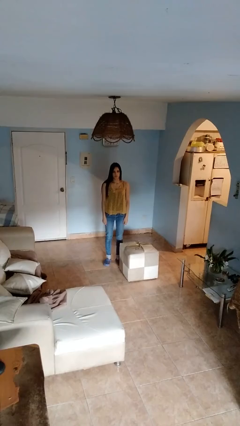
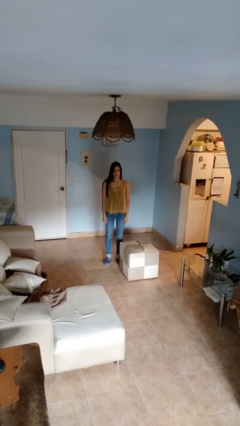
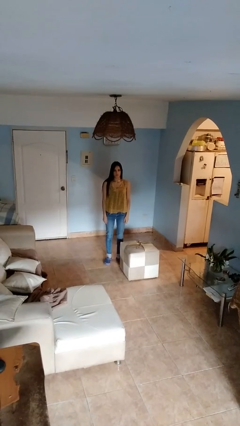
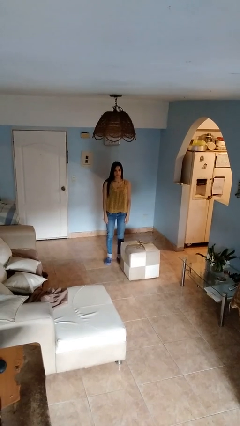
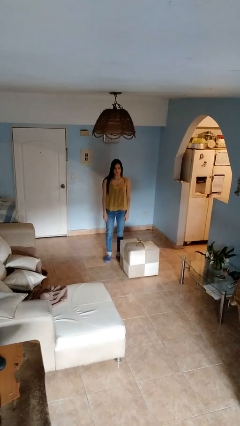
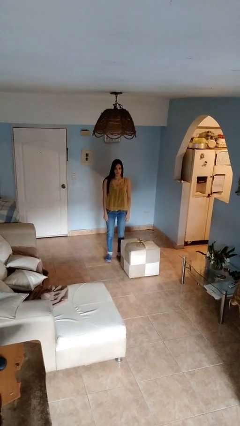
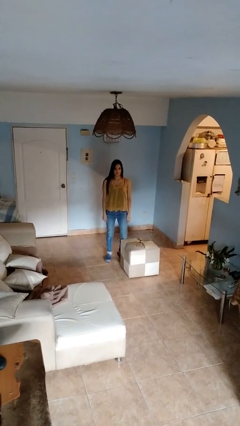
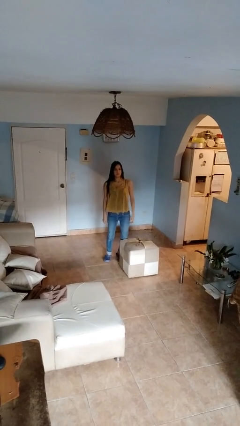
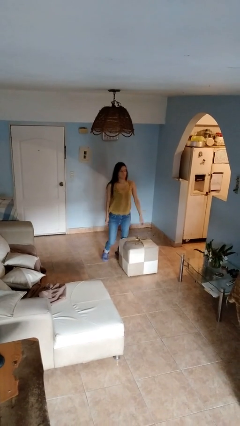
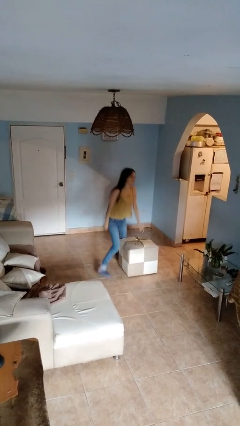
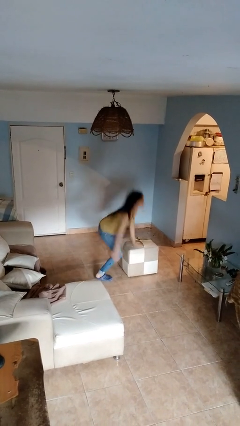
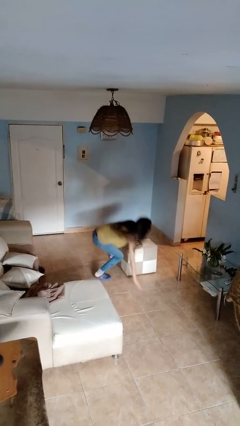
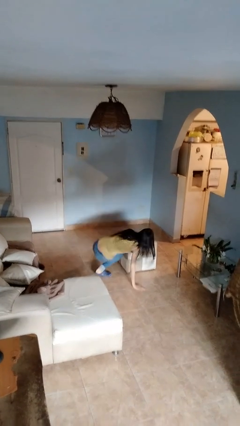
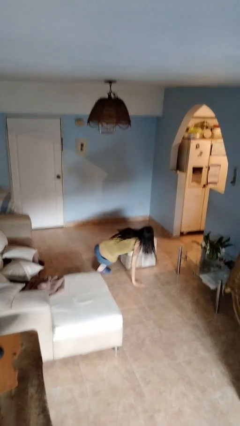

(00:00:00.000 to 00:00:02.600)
person trips on object on floor

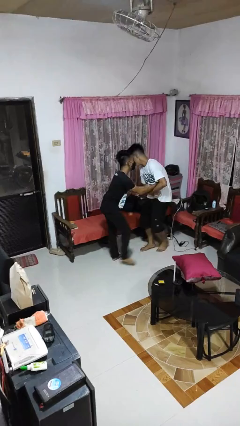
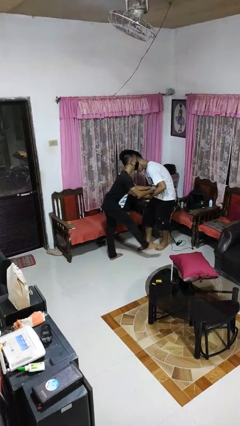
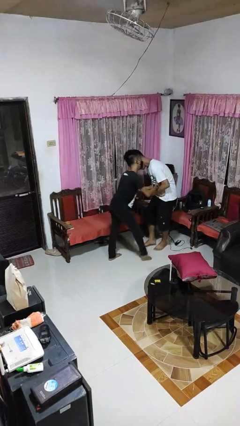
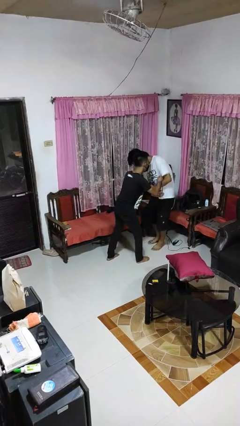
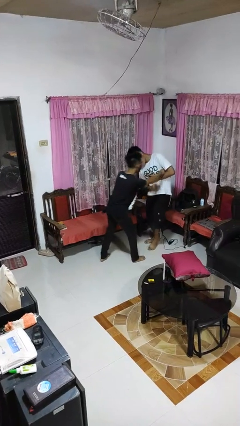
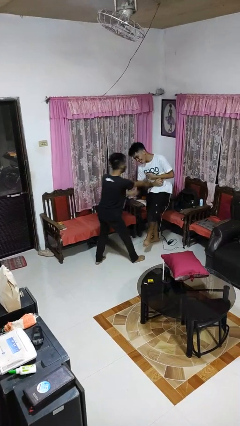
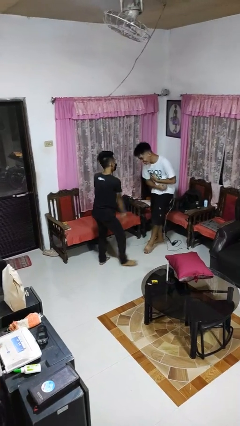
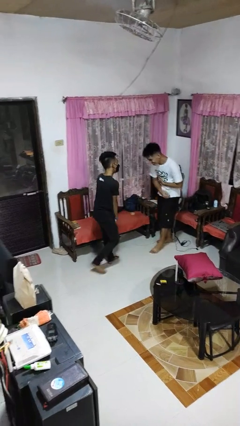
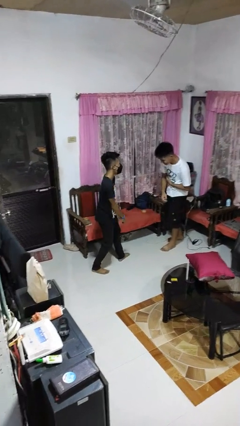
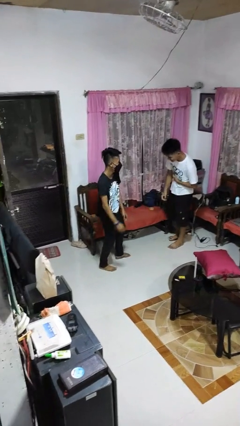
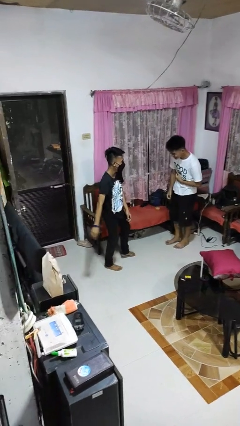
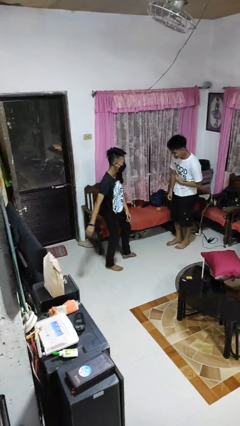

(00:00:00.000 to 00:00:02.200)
person tickles person

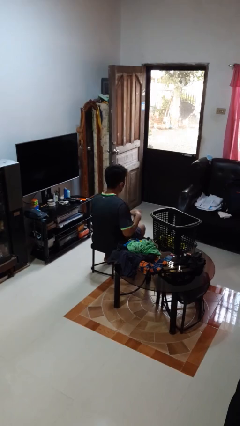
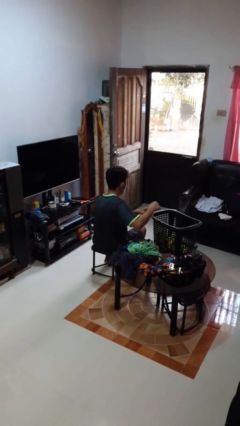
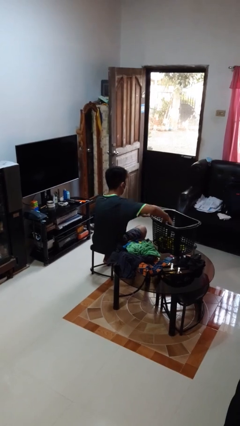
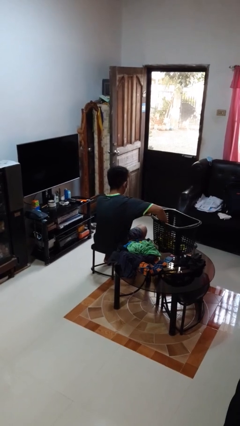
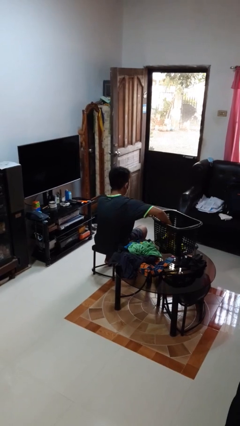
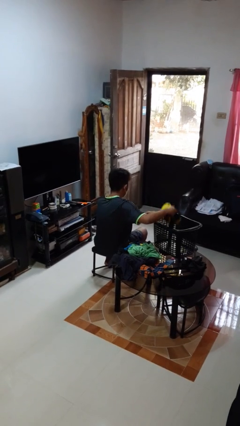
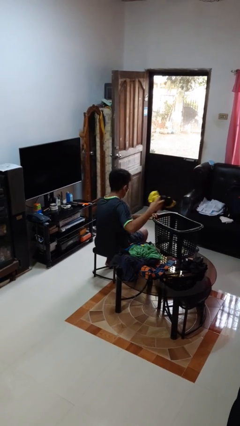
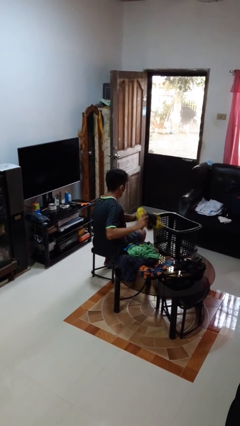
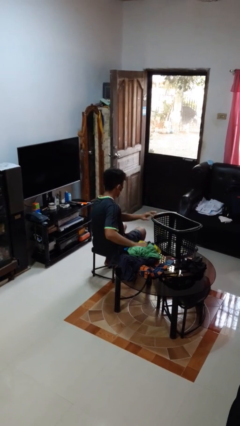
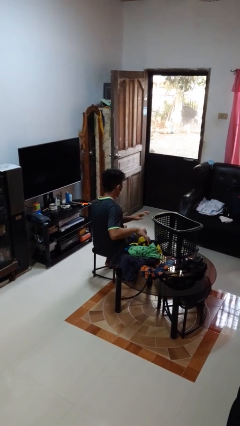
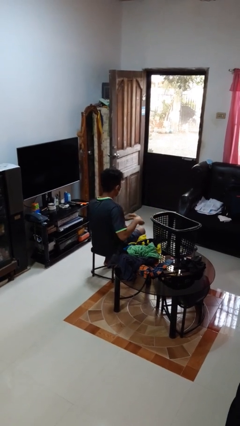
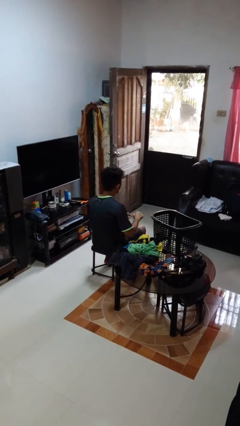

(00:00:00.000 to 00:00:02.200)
person takes object from basket

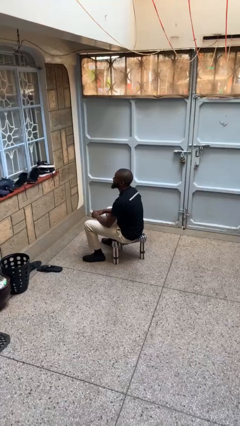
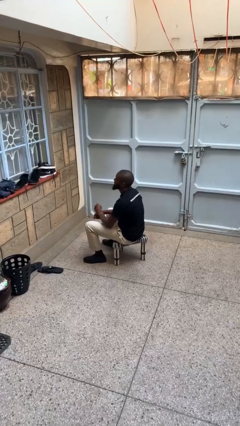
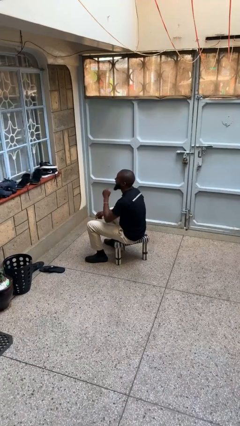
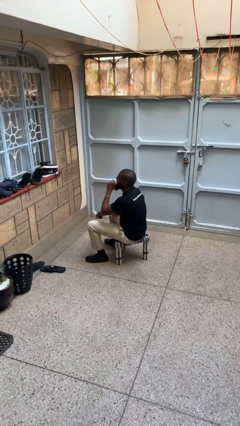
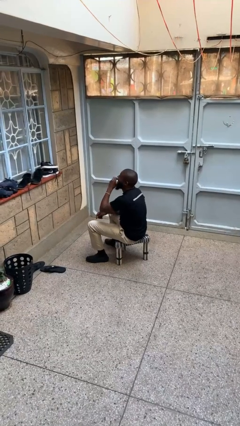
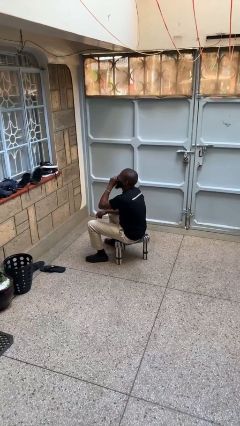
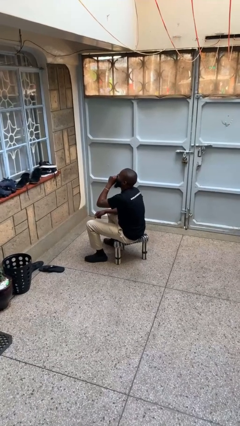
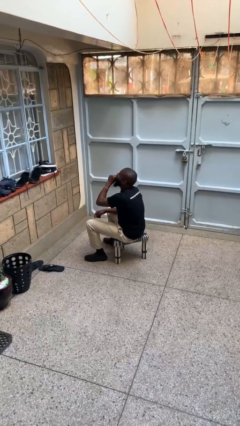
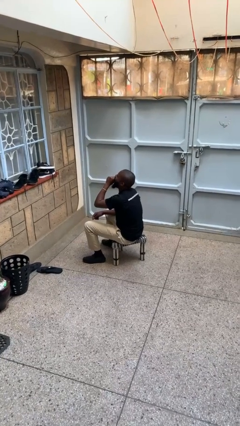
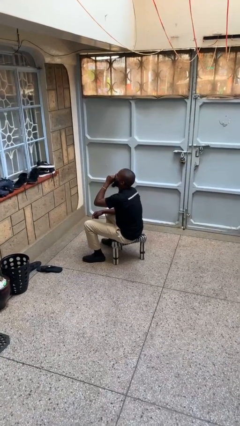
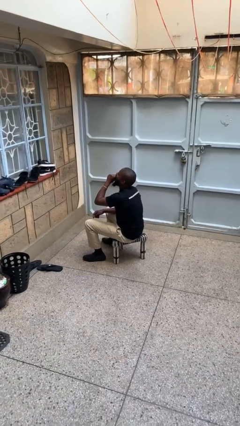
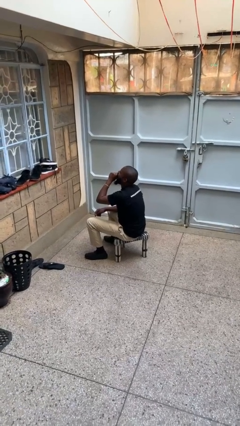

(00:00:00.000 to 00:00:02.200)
person yawns

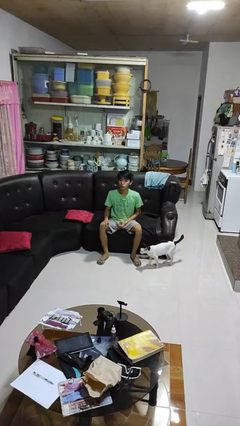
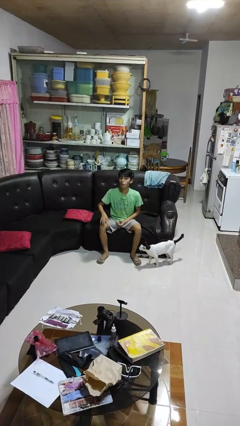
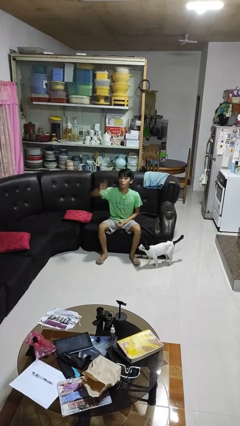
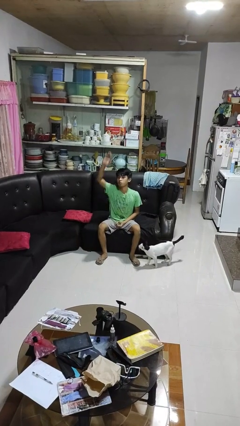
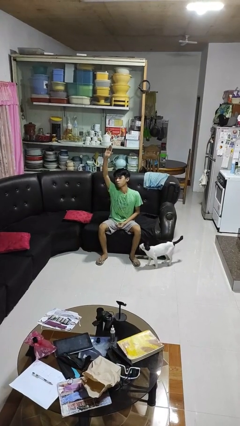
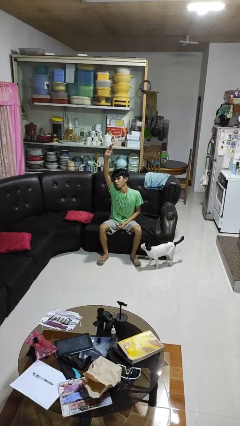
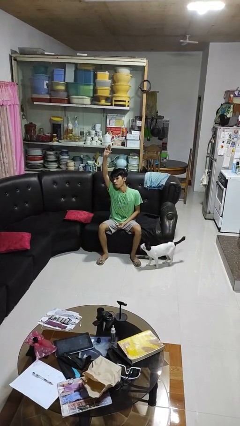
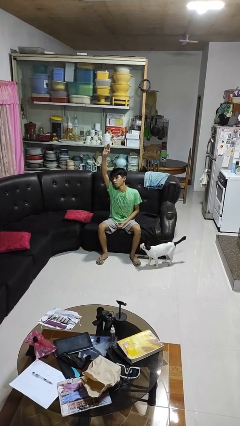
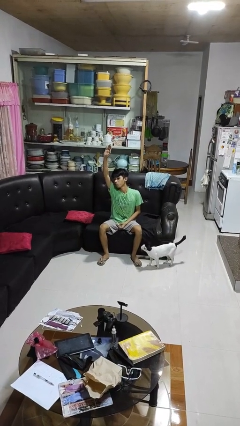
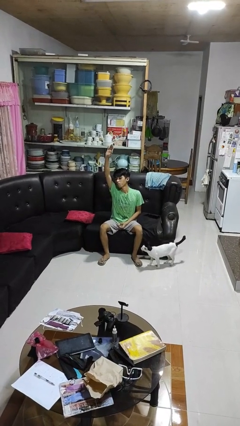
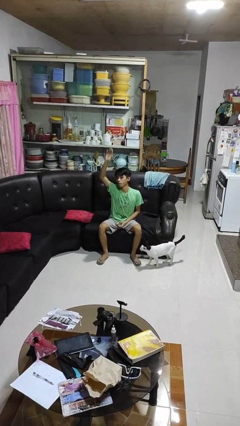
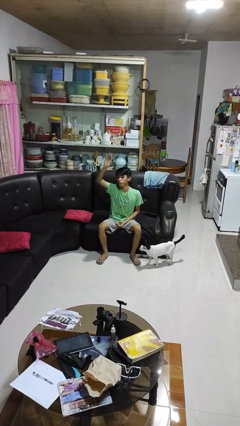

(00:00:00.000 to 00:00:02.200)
person gestures raise hand

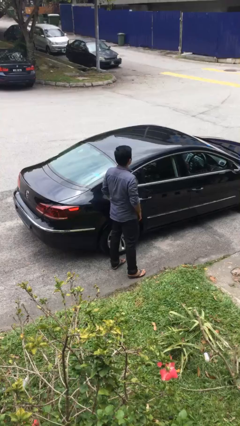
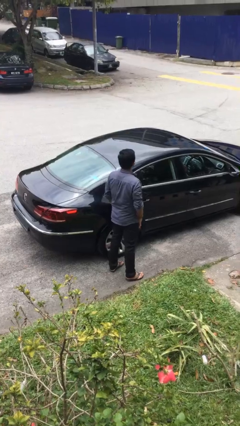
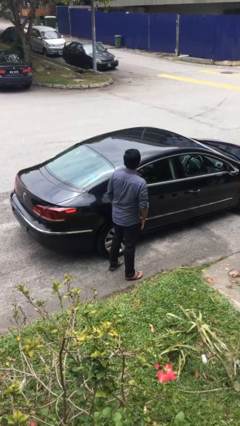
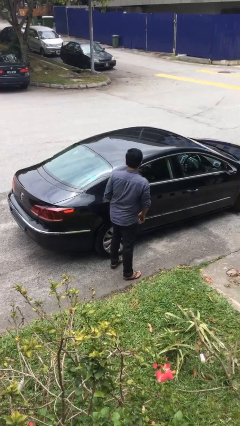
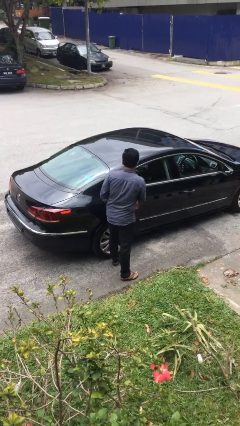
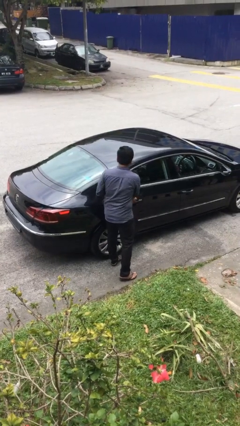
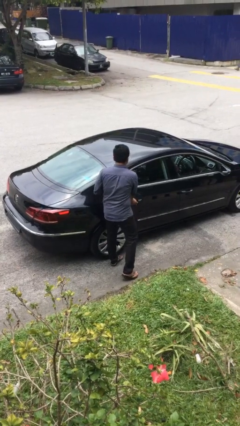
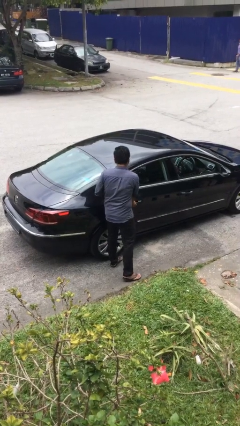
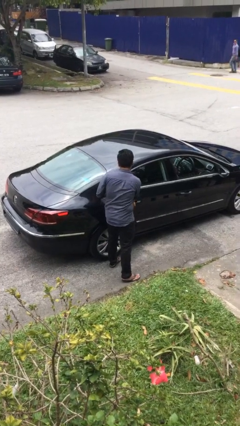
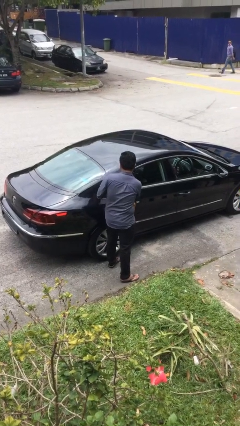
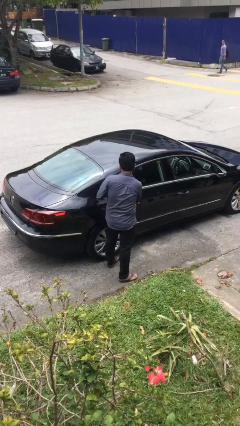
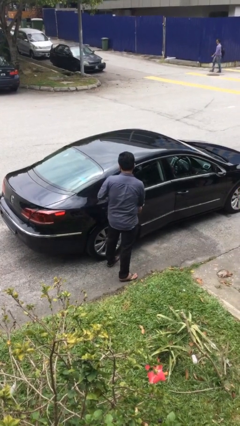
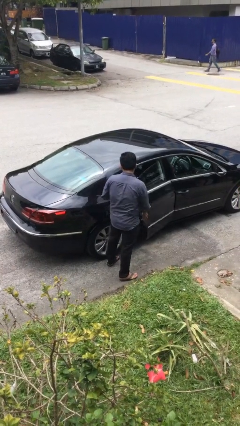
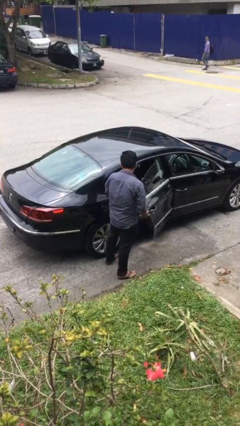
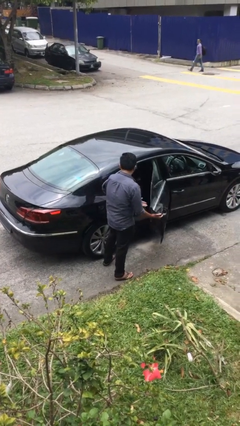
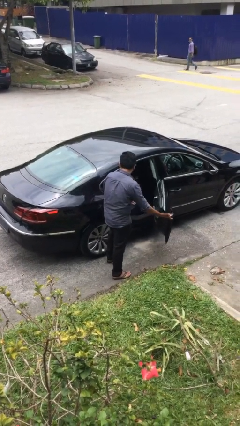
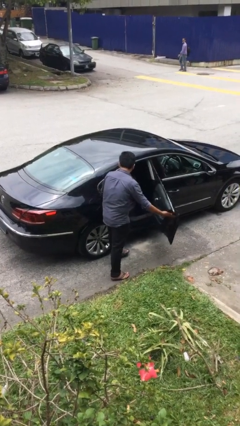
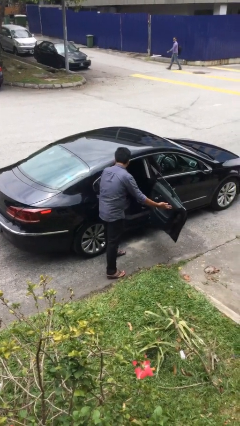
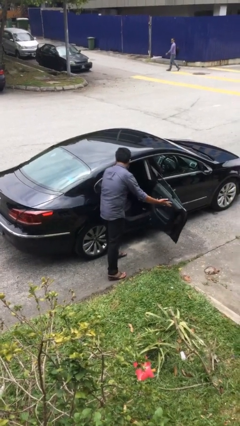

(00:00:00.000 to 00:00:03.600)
person opens car door

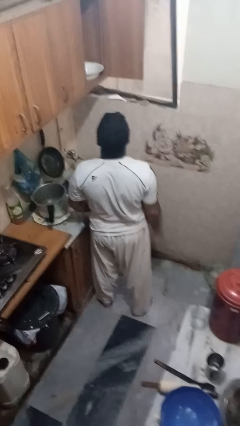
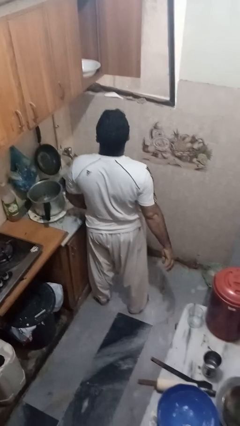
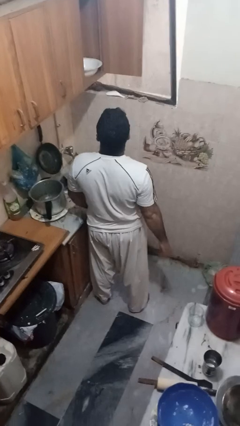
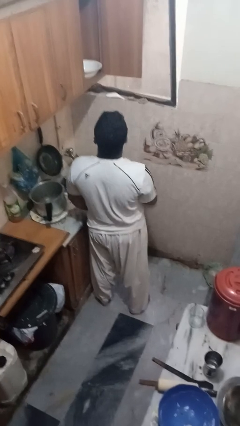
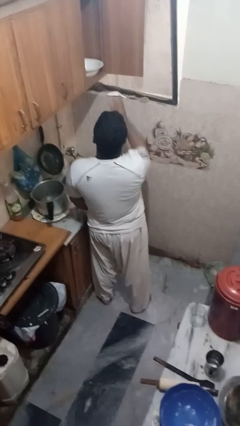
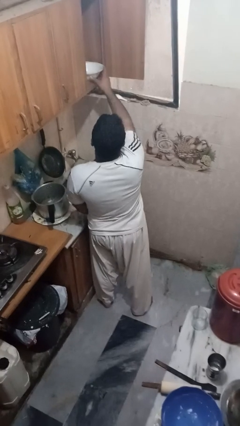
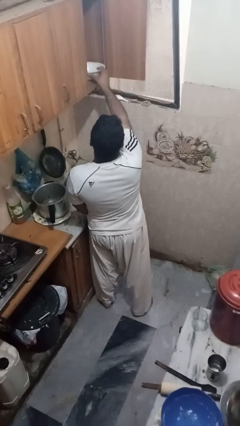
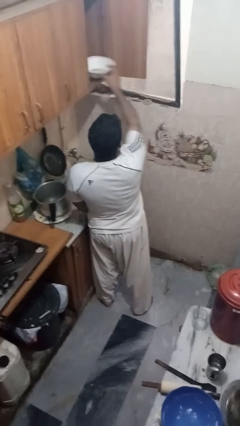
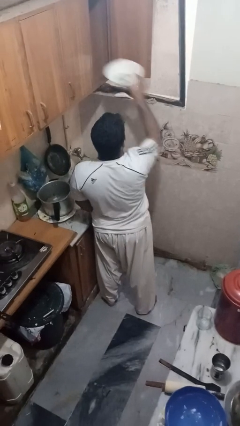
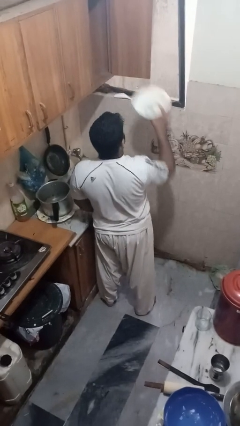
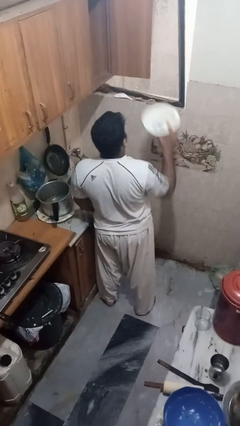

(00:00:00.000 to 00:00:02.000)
person takes object from cabinet
